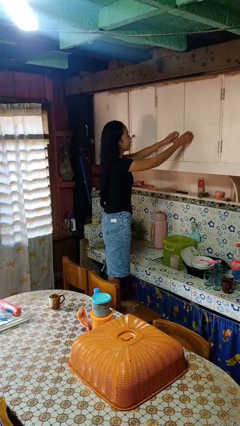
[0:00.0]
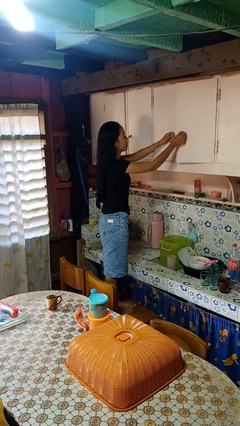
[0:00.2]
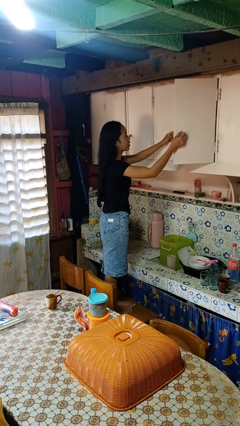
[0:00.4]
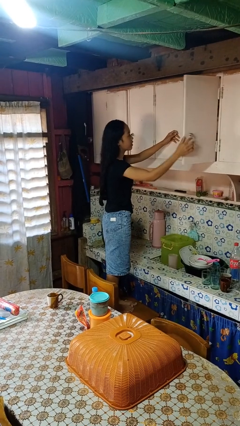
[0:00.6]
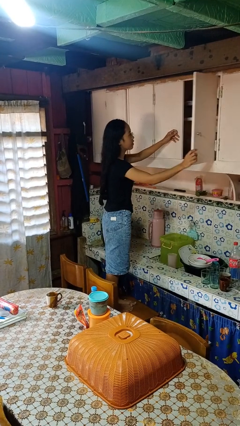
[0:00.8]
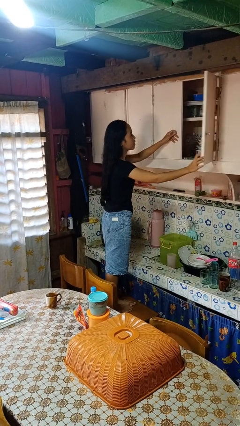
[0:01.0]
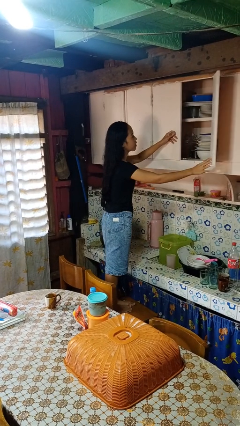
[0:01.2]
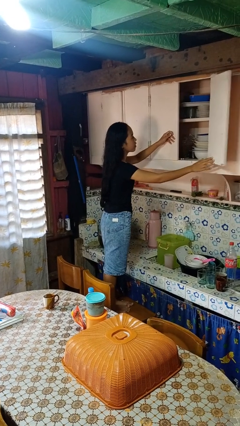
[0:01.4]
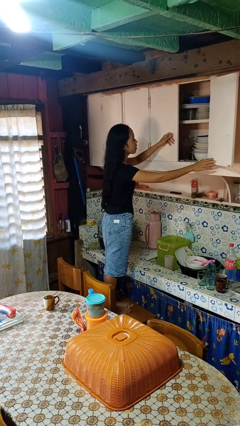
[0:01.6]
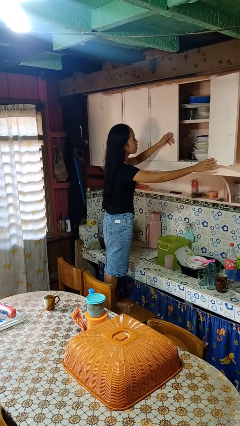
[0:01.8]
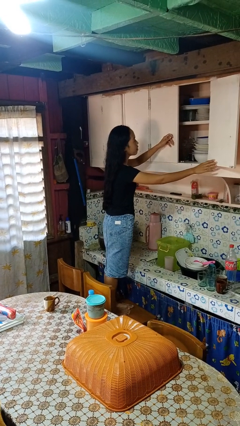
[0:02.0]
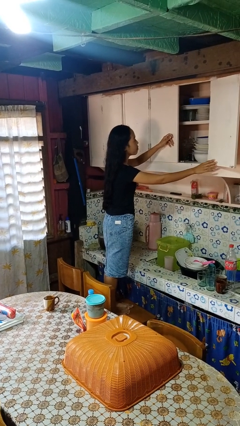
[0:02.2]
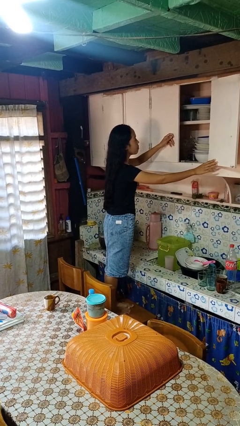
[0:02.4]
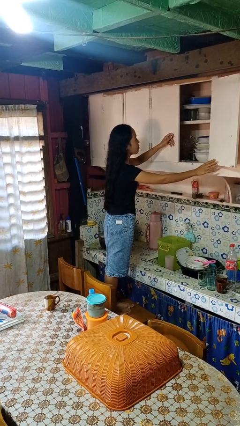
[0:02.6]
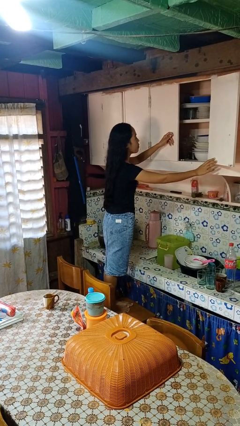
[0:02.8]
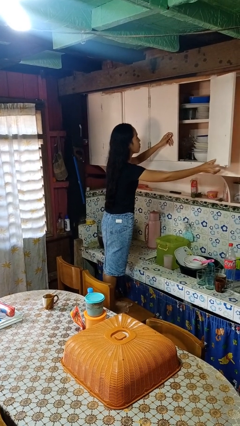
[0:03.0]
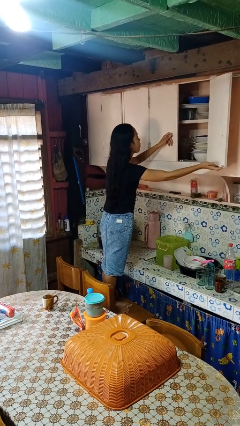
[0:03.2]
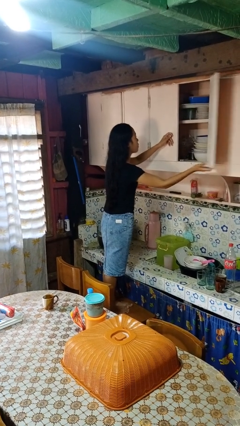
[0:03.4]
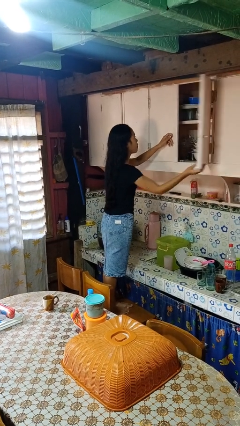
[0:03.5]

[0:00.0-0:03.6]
person opens cabinet

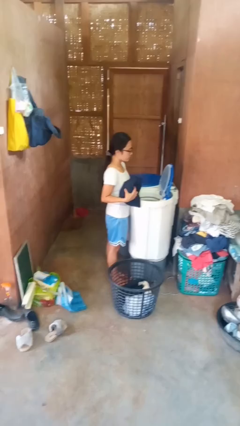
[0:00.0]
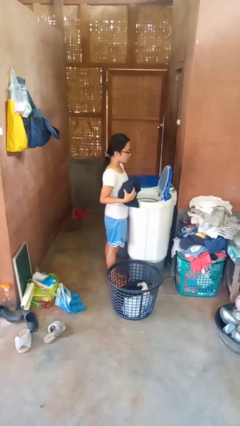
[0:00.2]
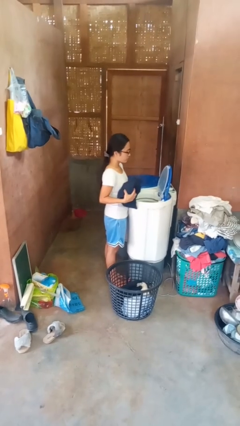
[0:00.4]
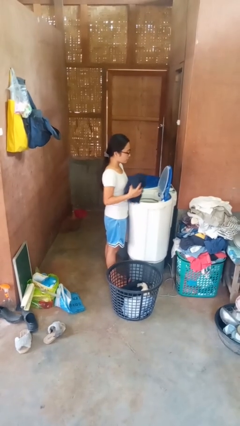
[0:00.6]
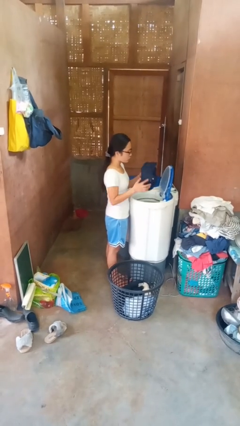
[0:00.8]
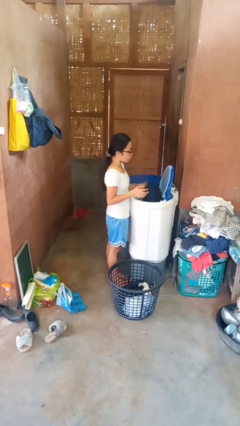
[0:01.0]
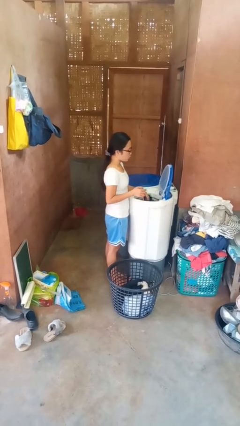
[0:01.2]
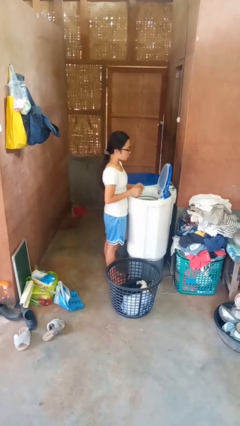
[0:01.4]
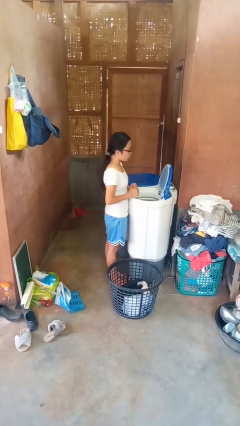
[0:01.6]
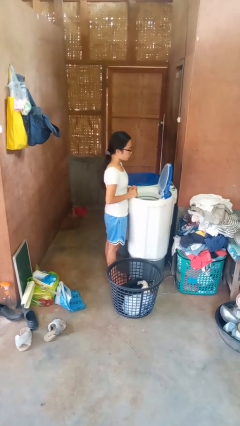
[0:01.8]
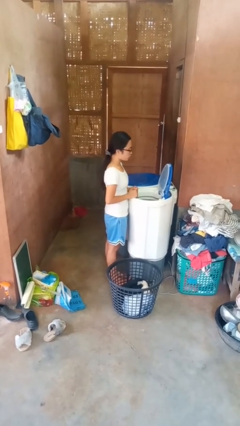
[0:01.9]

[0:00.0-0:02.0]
person loads dryer

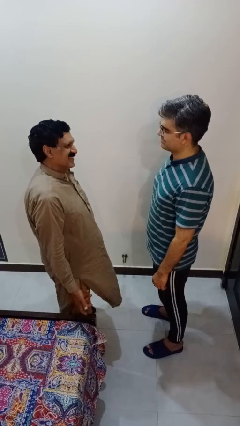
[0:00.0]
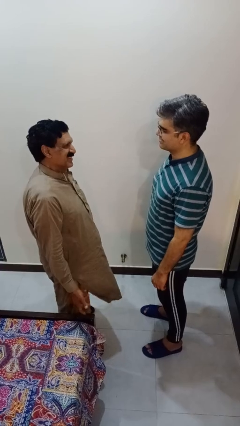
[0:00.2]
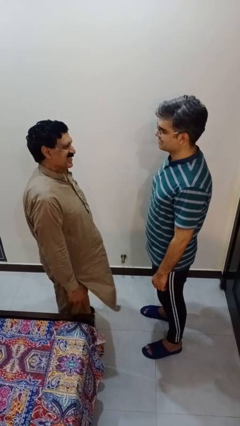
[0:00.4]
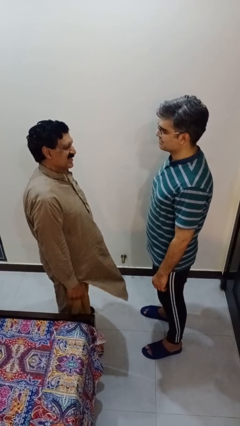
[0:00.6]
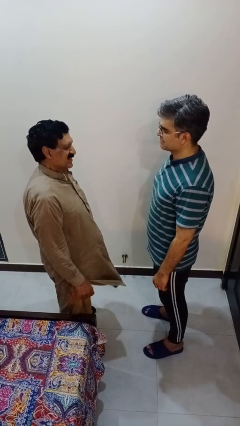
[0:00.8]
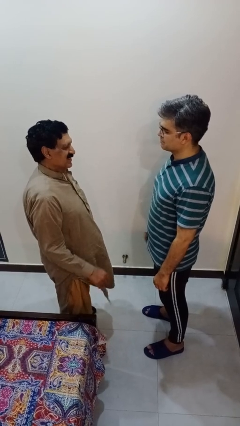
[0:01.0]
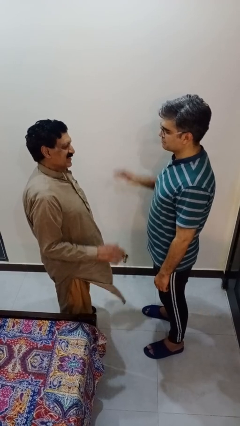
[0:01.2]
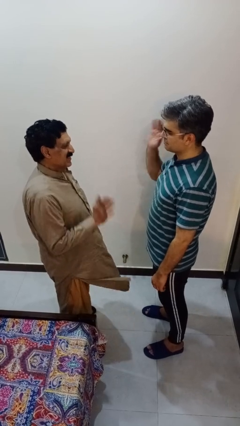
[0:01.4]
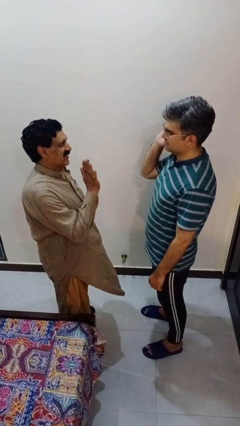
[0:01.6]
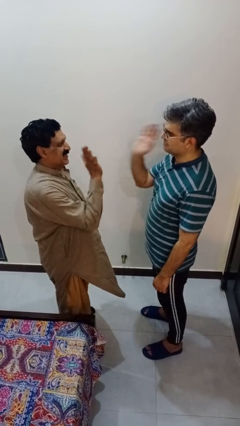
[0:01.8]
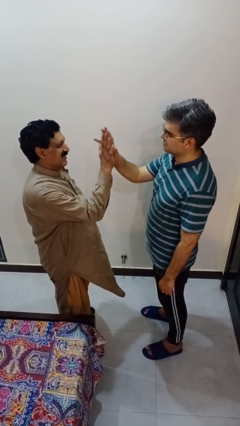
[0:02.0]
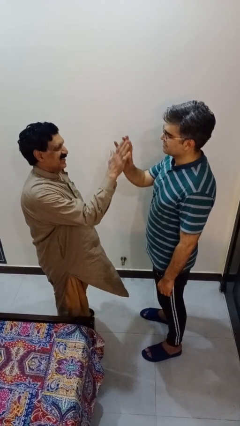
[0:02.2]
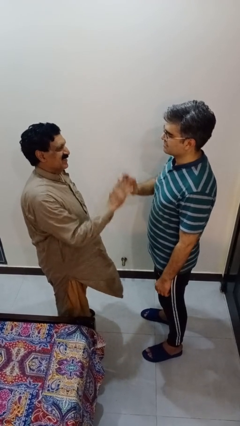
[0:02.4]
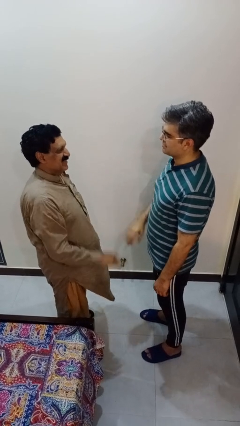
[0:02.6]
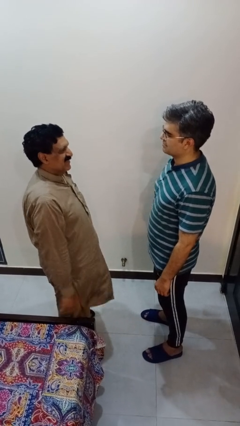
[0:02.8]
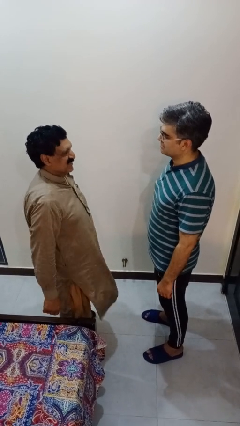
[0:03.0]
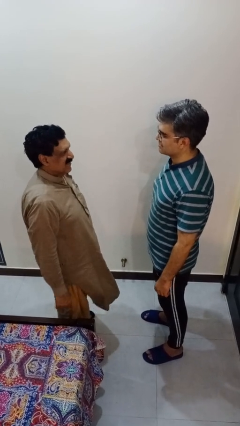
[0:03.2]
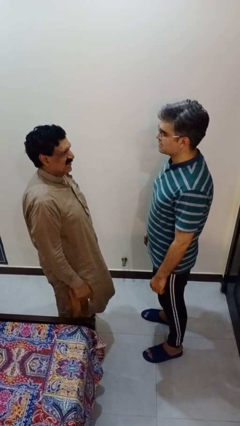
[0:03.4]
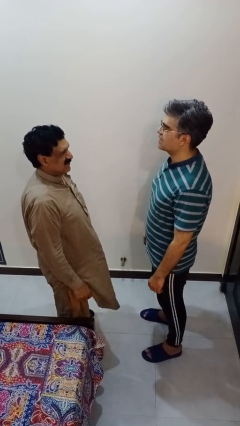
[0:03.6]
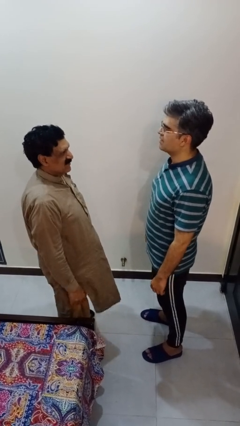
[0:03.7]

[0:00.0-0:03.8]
person highfives hand

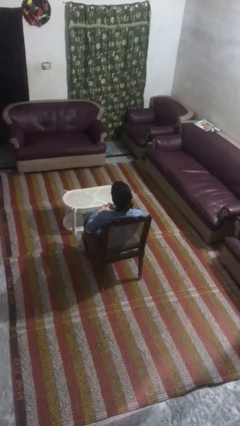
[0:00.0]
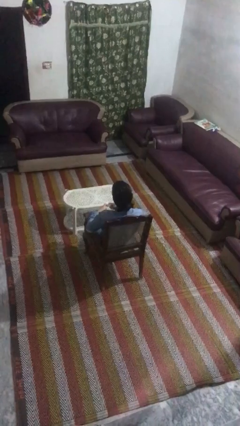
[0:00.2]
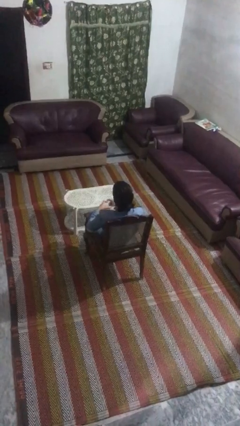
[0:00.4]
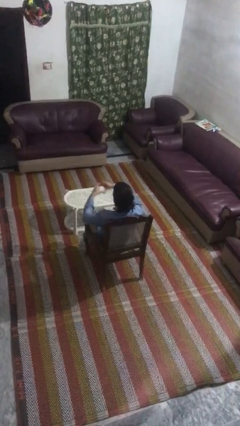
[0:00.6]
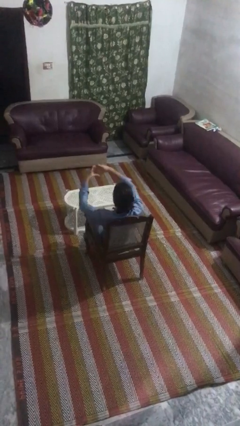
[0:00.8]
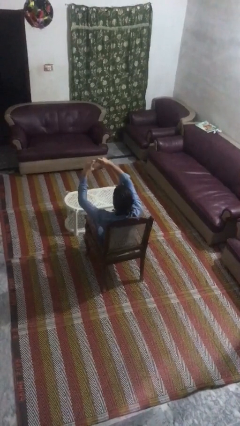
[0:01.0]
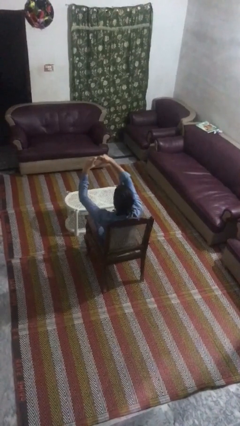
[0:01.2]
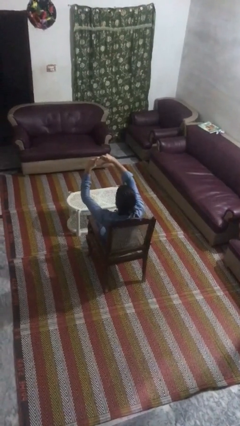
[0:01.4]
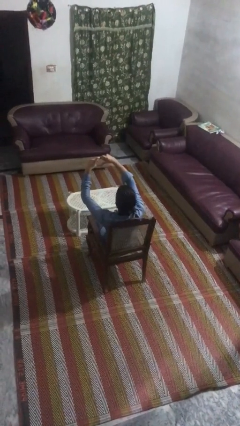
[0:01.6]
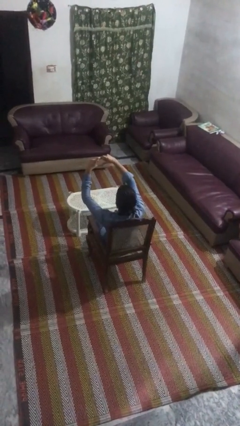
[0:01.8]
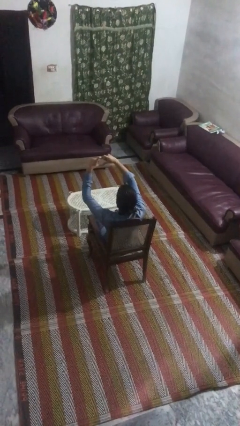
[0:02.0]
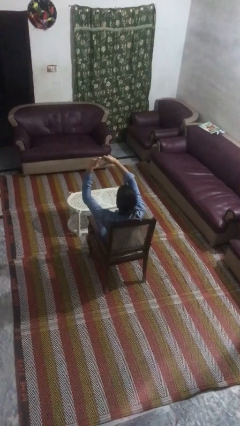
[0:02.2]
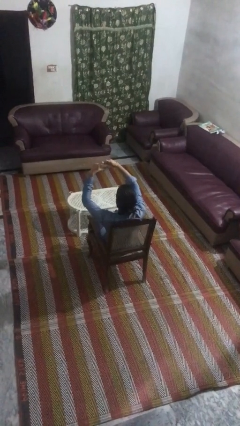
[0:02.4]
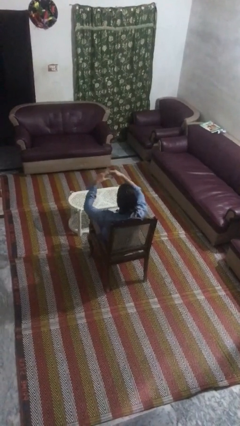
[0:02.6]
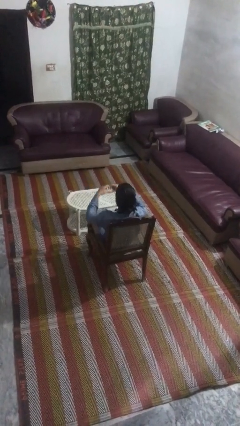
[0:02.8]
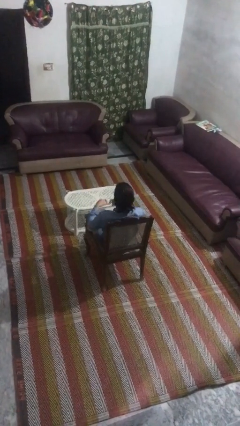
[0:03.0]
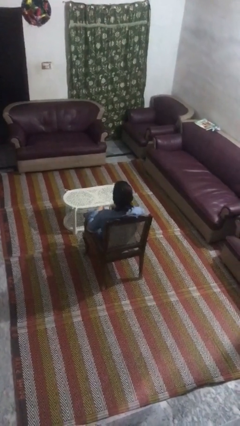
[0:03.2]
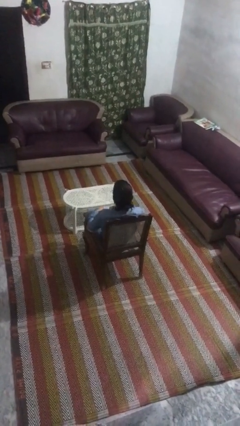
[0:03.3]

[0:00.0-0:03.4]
person gestures heart

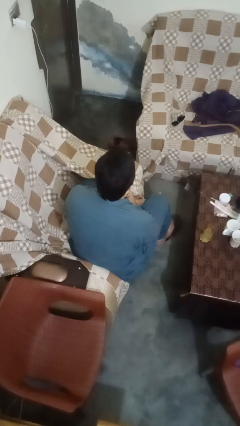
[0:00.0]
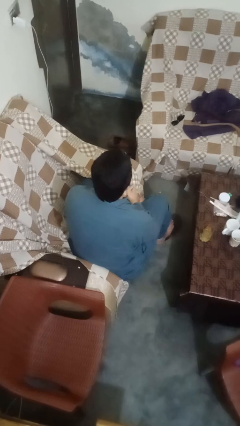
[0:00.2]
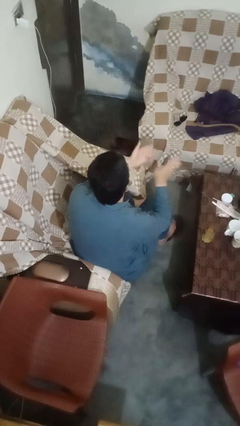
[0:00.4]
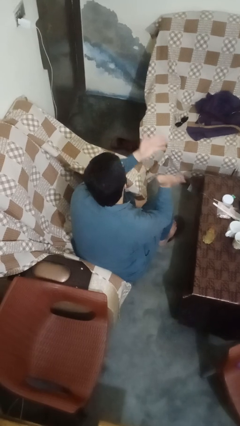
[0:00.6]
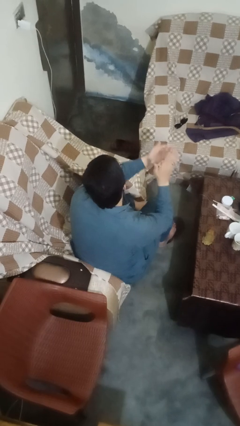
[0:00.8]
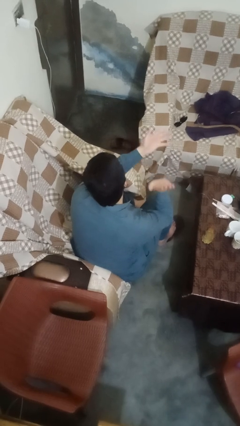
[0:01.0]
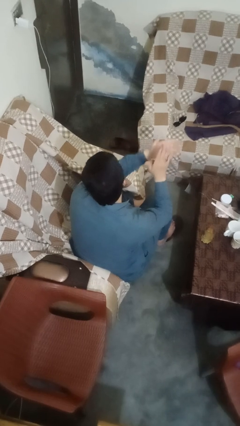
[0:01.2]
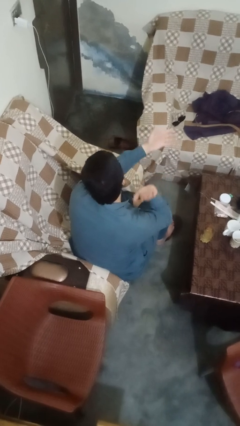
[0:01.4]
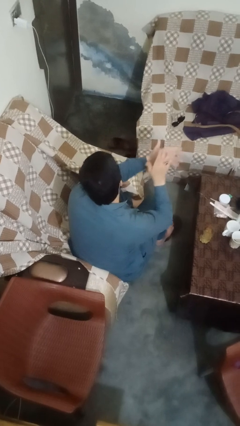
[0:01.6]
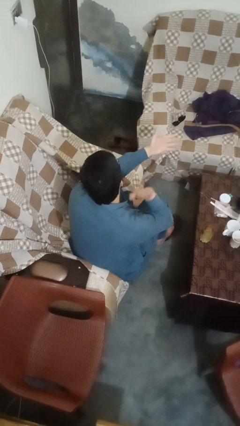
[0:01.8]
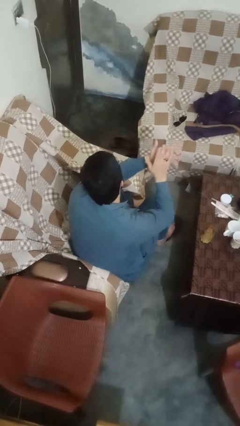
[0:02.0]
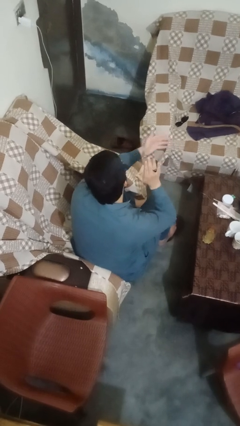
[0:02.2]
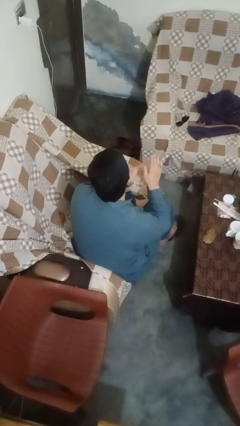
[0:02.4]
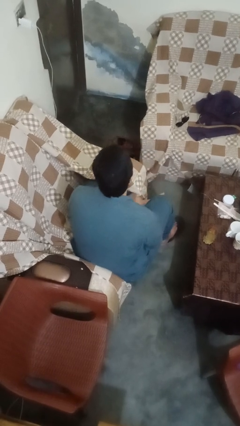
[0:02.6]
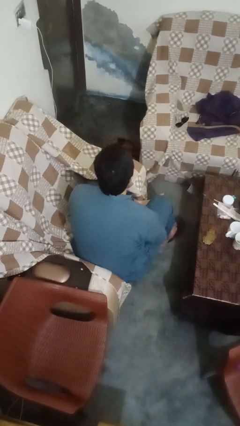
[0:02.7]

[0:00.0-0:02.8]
person claps hands

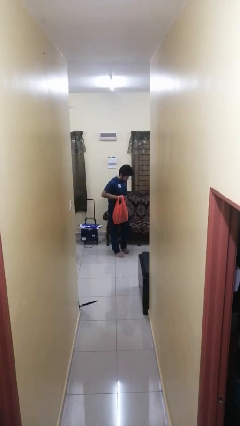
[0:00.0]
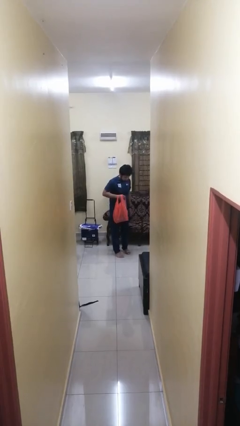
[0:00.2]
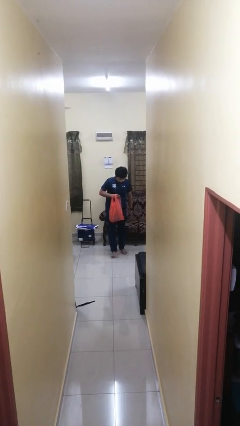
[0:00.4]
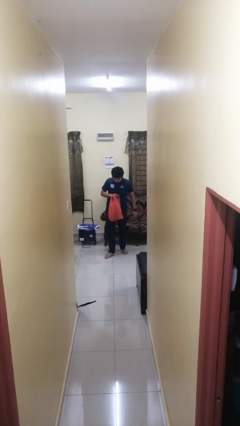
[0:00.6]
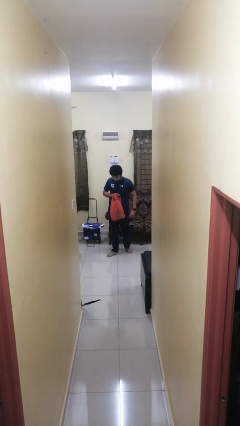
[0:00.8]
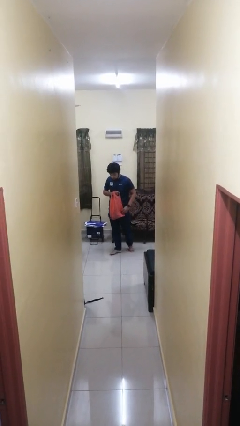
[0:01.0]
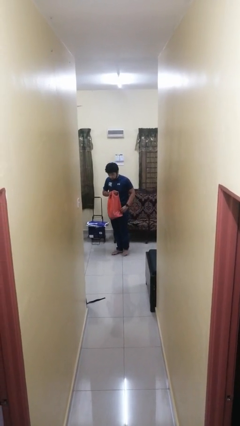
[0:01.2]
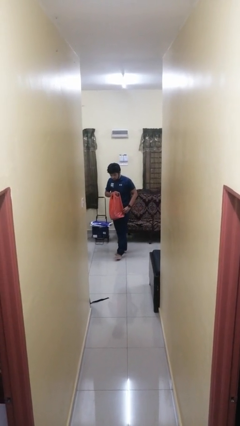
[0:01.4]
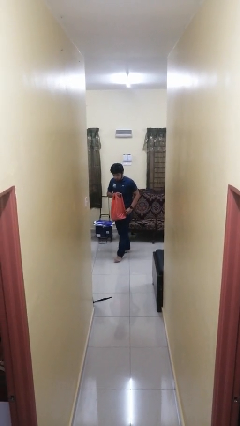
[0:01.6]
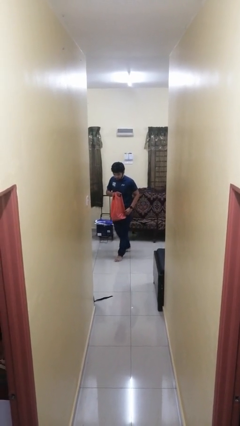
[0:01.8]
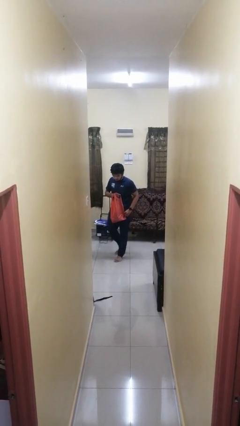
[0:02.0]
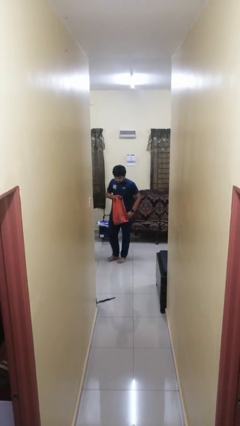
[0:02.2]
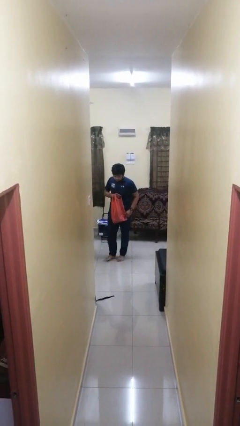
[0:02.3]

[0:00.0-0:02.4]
person carries groceries
